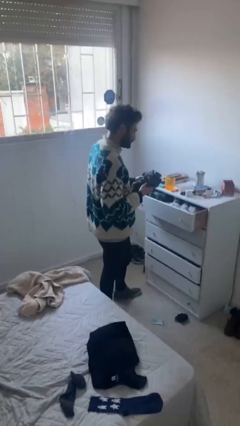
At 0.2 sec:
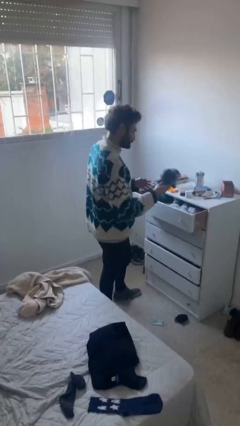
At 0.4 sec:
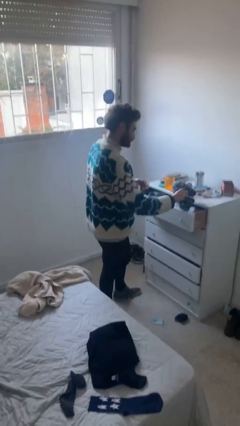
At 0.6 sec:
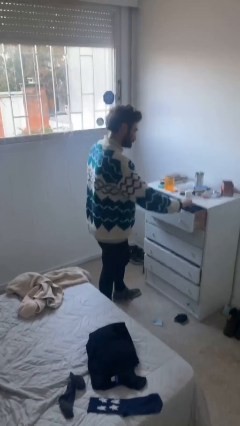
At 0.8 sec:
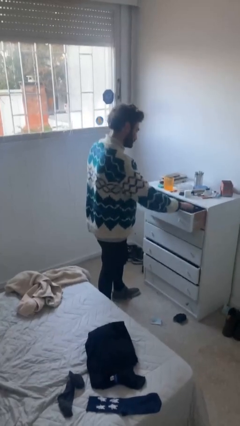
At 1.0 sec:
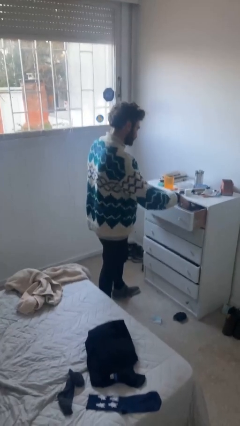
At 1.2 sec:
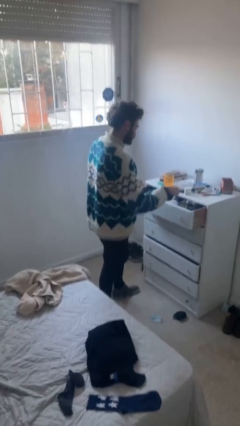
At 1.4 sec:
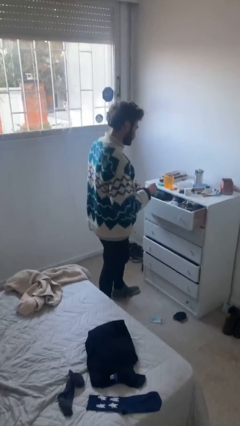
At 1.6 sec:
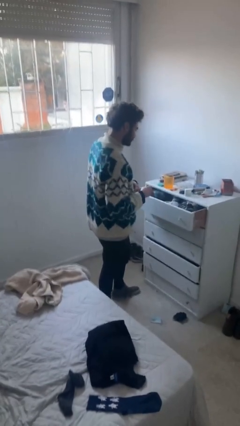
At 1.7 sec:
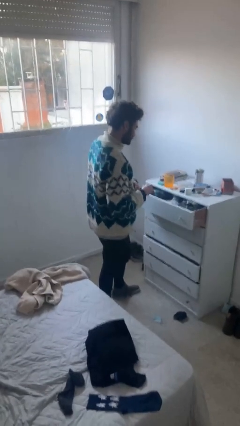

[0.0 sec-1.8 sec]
person puts clothes into dresser

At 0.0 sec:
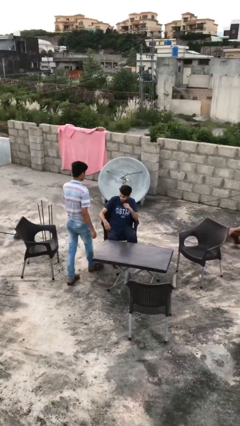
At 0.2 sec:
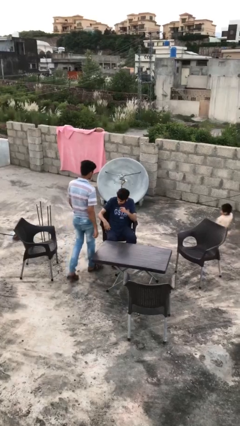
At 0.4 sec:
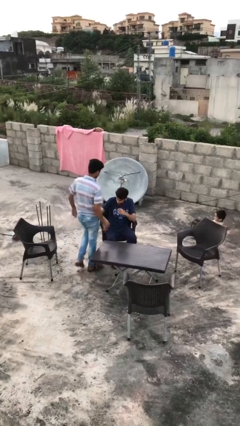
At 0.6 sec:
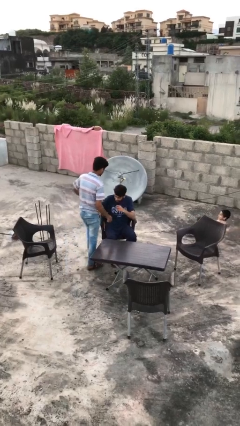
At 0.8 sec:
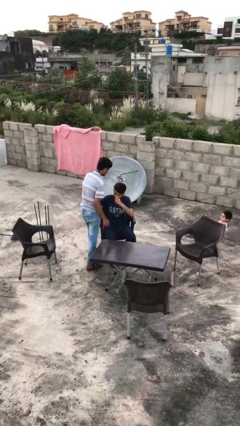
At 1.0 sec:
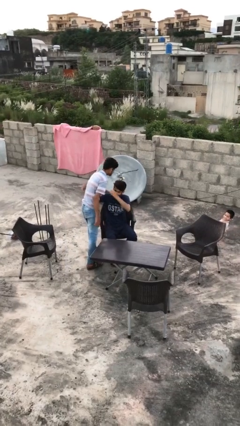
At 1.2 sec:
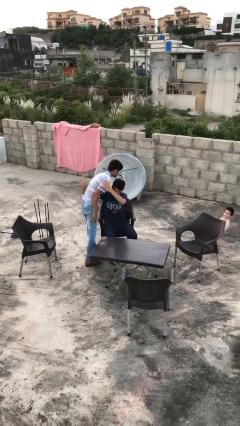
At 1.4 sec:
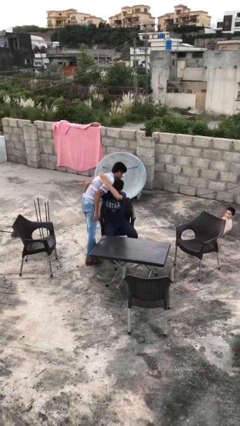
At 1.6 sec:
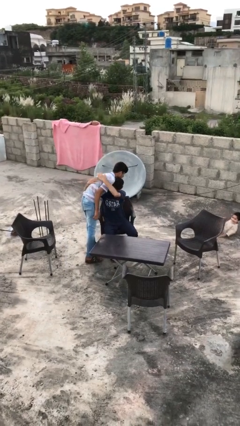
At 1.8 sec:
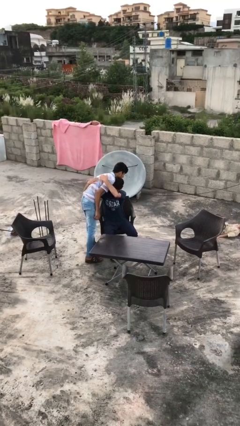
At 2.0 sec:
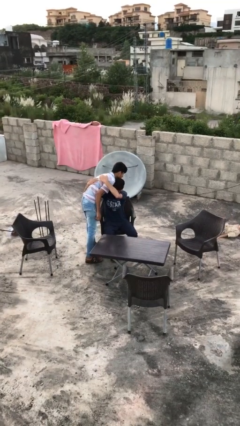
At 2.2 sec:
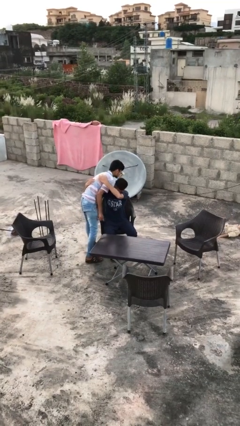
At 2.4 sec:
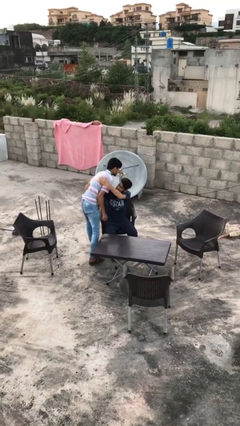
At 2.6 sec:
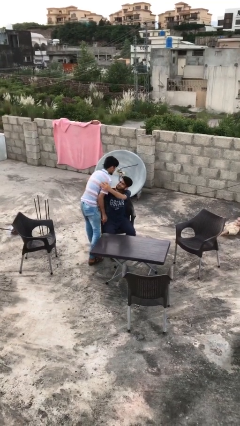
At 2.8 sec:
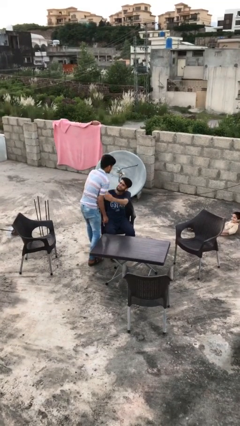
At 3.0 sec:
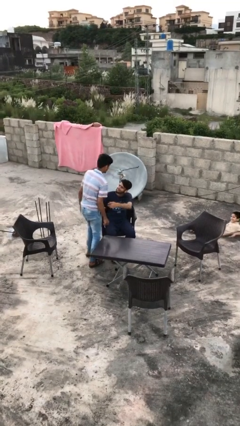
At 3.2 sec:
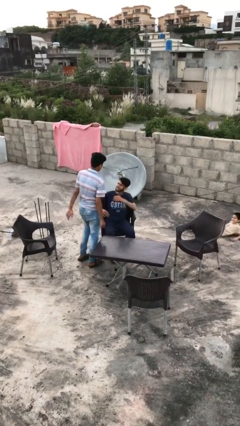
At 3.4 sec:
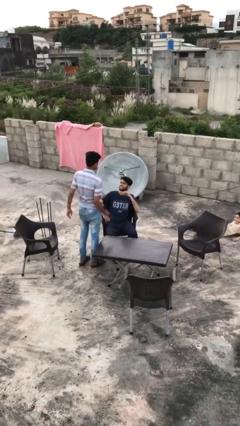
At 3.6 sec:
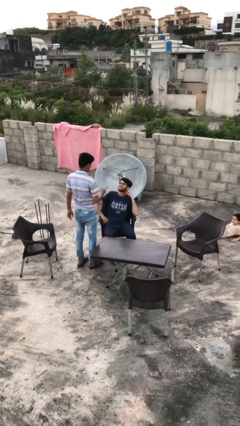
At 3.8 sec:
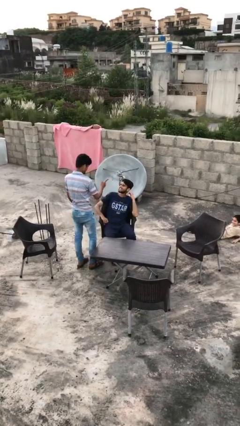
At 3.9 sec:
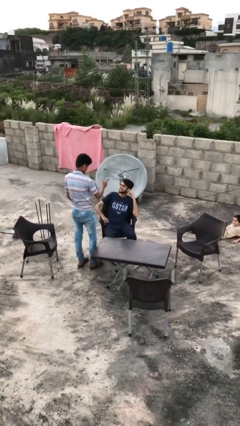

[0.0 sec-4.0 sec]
person embraces person

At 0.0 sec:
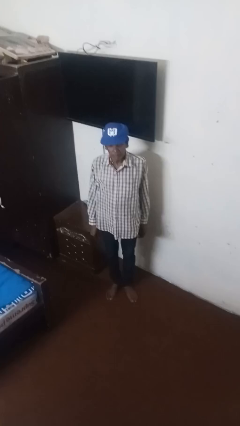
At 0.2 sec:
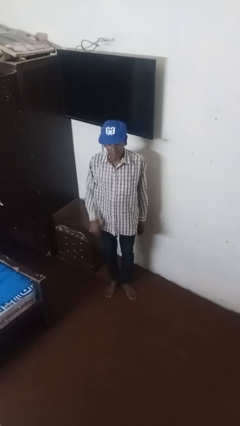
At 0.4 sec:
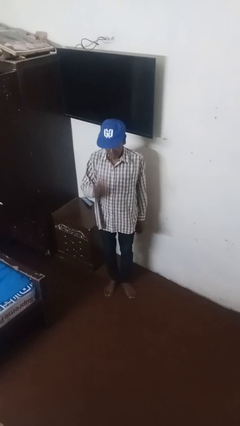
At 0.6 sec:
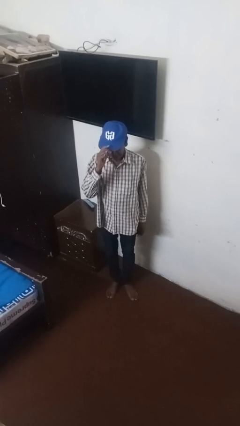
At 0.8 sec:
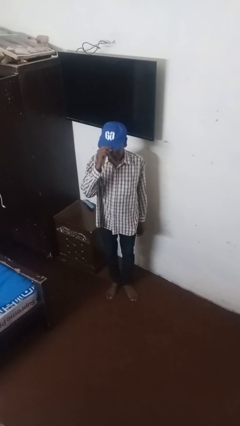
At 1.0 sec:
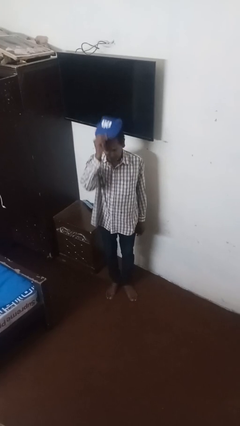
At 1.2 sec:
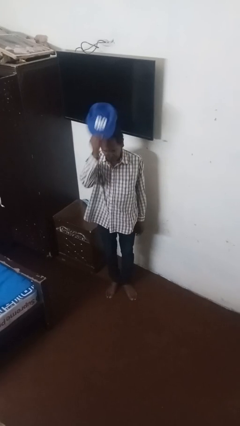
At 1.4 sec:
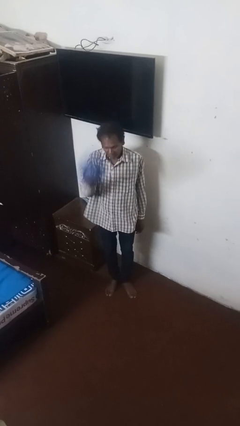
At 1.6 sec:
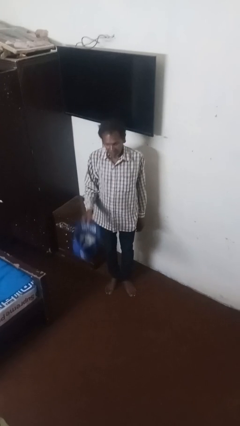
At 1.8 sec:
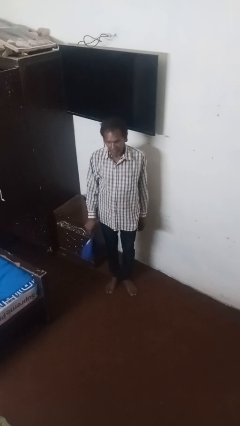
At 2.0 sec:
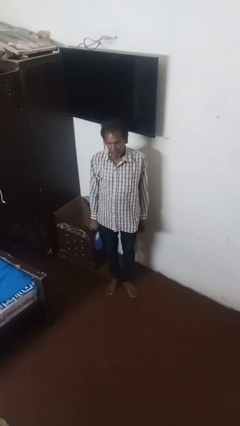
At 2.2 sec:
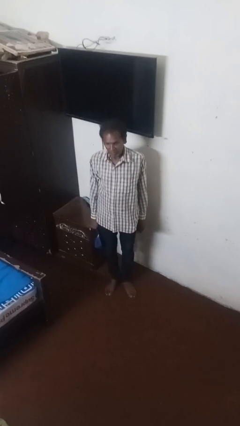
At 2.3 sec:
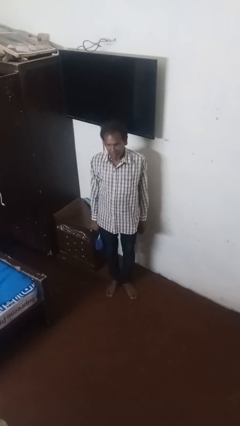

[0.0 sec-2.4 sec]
person takes off hat

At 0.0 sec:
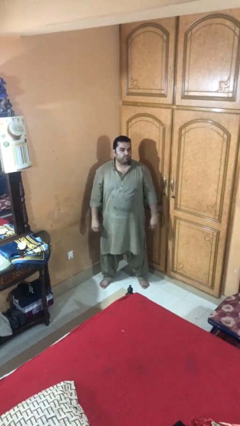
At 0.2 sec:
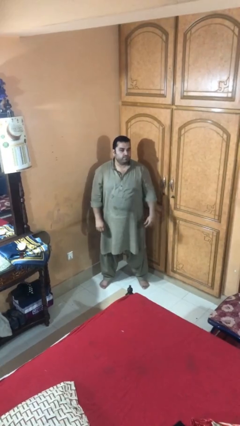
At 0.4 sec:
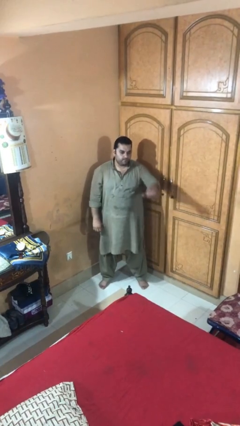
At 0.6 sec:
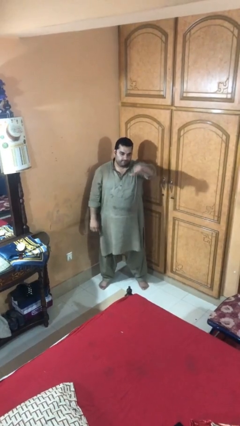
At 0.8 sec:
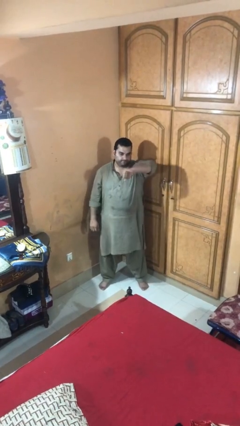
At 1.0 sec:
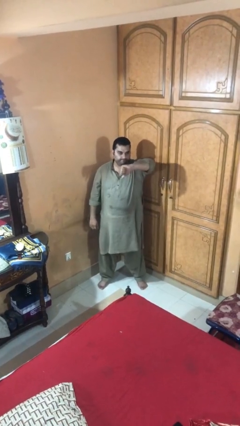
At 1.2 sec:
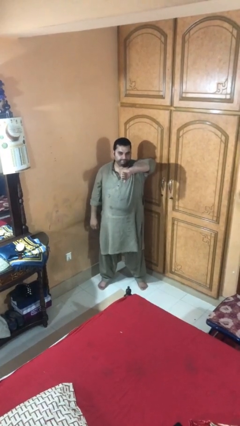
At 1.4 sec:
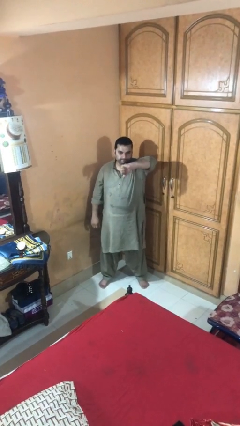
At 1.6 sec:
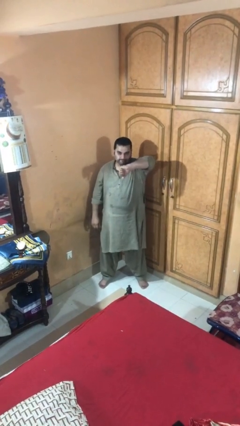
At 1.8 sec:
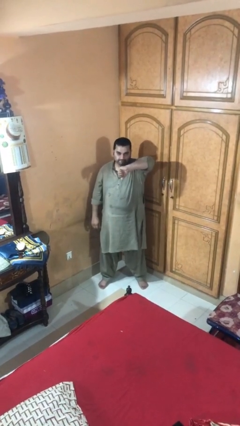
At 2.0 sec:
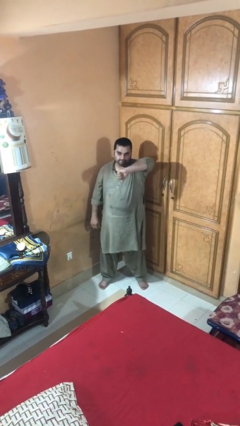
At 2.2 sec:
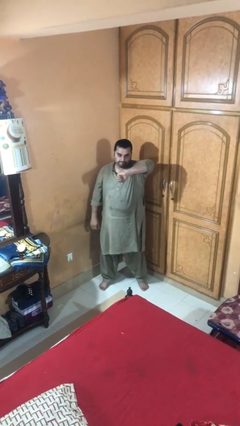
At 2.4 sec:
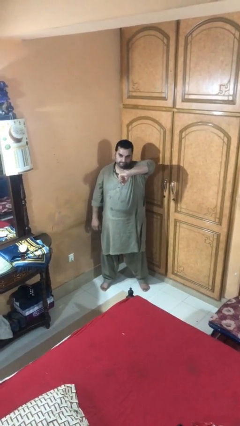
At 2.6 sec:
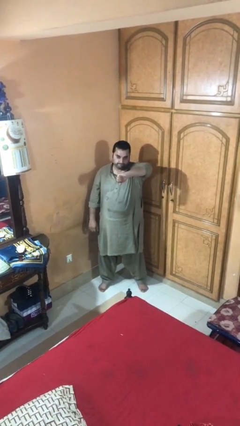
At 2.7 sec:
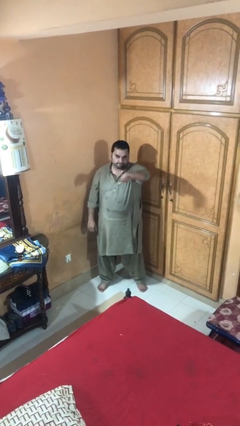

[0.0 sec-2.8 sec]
person gestures thumbs down

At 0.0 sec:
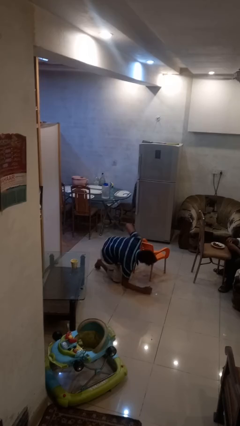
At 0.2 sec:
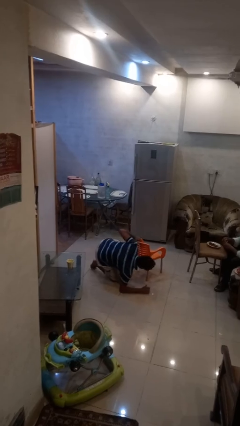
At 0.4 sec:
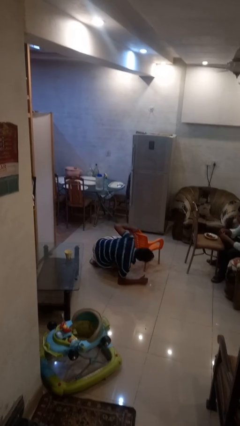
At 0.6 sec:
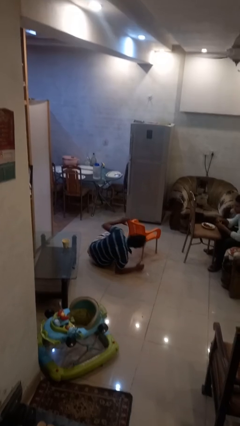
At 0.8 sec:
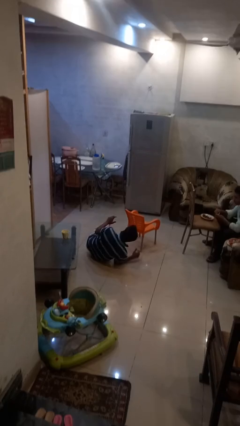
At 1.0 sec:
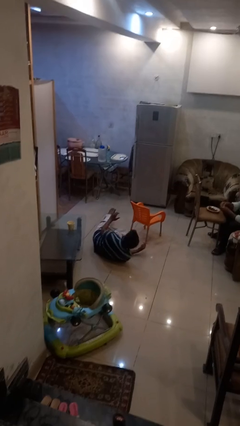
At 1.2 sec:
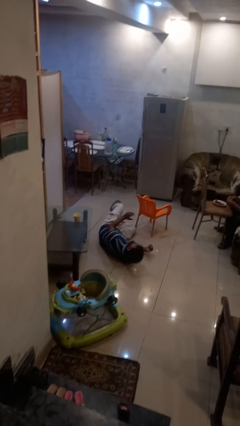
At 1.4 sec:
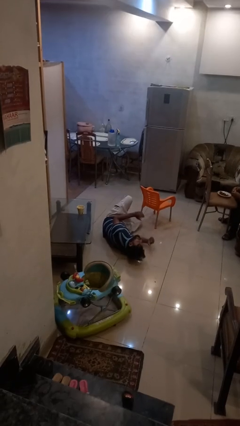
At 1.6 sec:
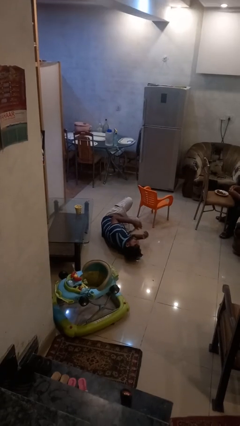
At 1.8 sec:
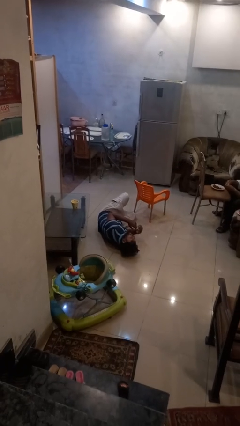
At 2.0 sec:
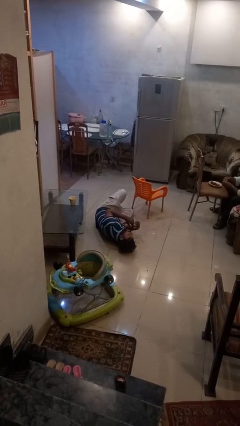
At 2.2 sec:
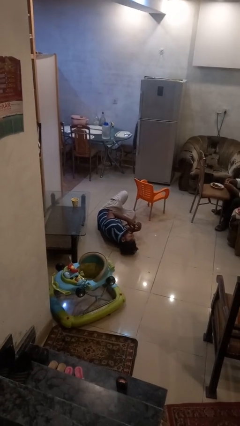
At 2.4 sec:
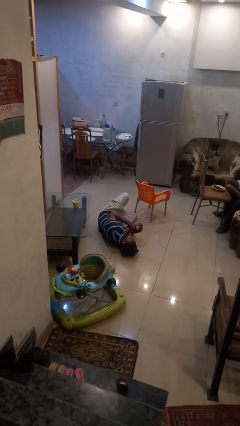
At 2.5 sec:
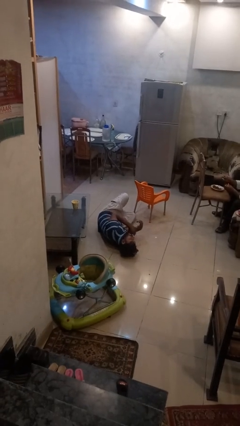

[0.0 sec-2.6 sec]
person lies down on floor

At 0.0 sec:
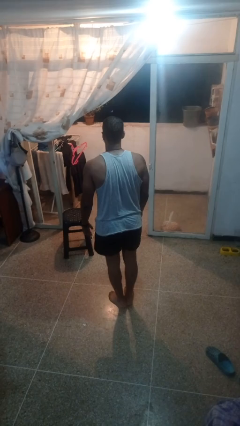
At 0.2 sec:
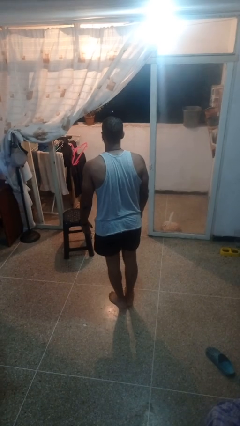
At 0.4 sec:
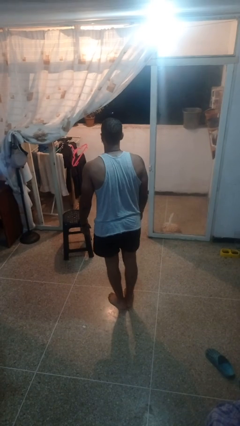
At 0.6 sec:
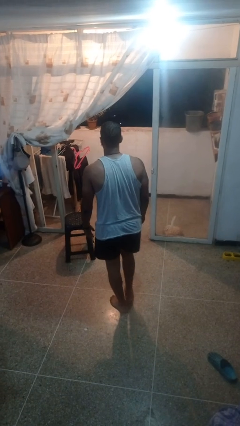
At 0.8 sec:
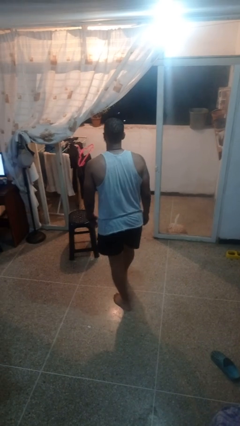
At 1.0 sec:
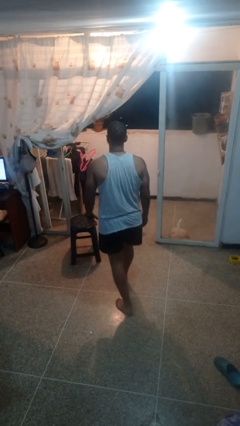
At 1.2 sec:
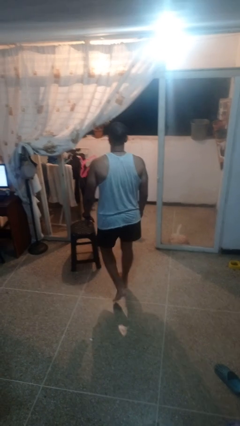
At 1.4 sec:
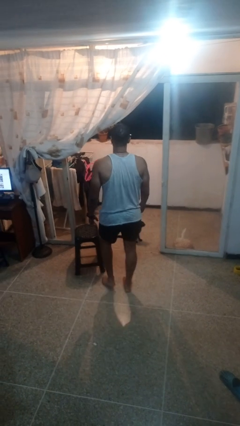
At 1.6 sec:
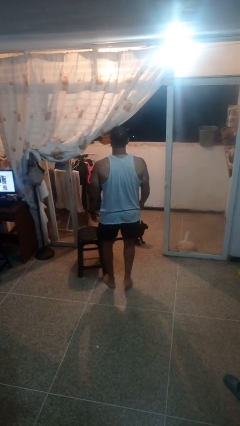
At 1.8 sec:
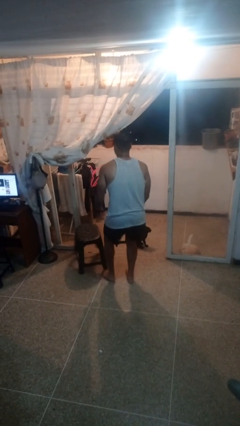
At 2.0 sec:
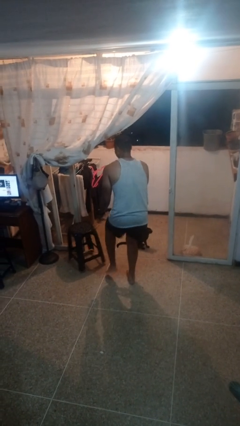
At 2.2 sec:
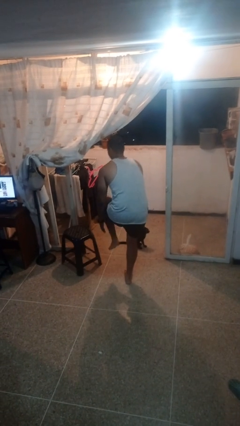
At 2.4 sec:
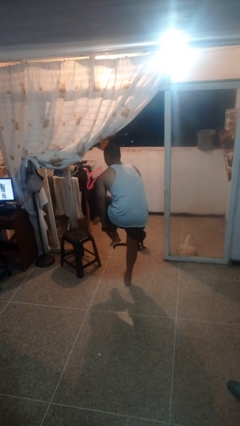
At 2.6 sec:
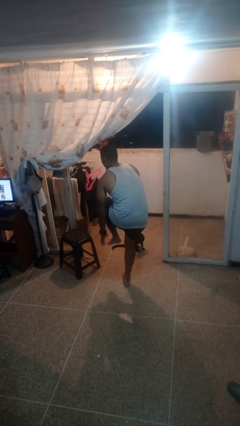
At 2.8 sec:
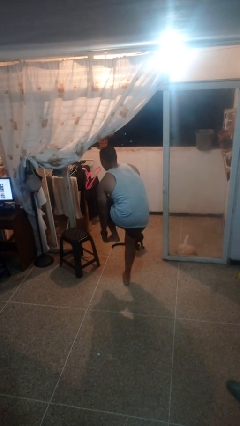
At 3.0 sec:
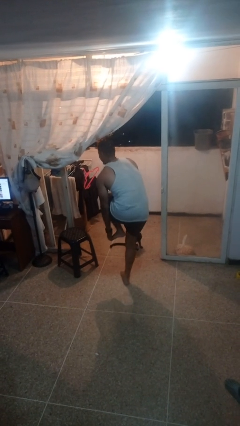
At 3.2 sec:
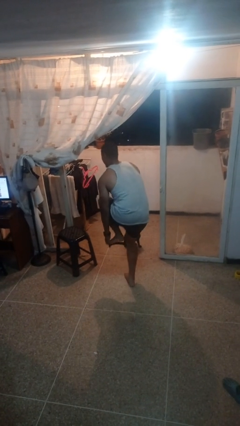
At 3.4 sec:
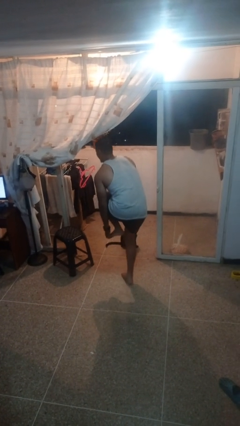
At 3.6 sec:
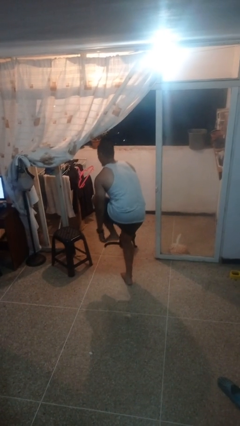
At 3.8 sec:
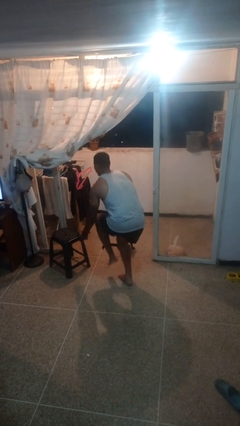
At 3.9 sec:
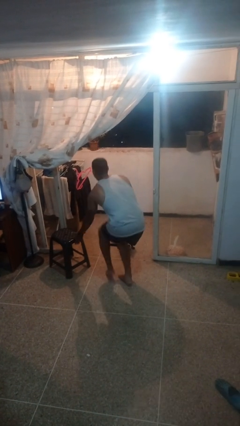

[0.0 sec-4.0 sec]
person stubs toe
